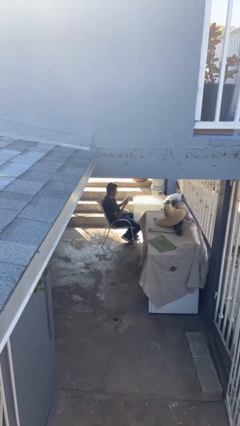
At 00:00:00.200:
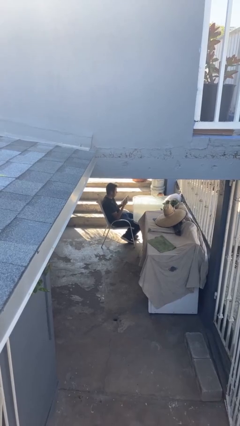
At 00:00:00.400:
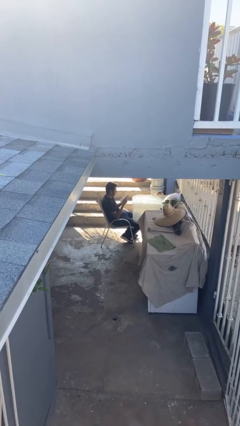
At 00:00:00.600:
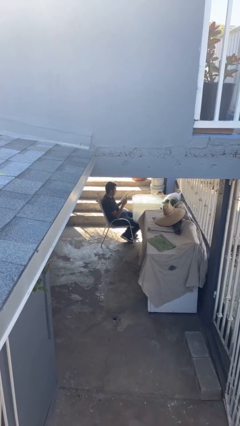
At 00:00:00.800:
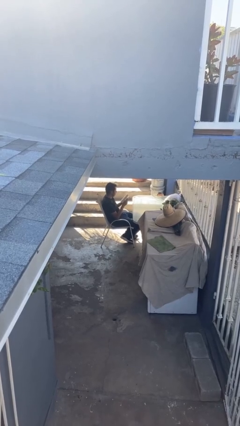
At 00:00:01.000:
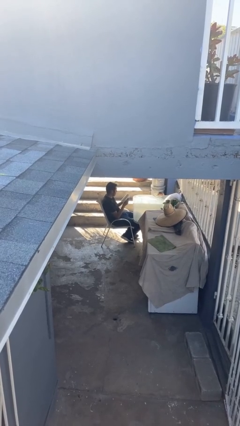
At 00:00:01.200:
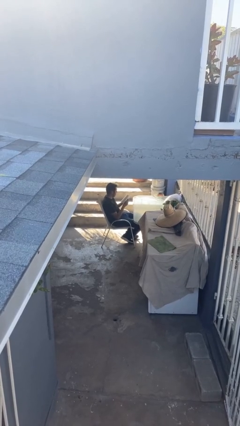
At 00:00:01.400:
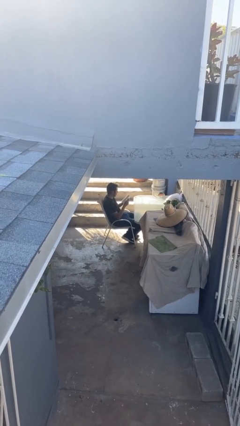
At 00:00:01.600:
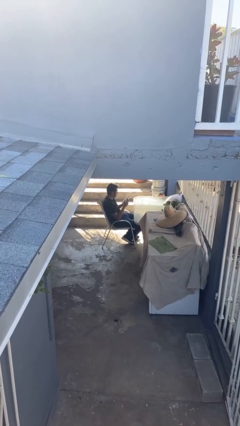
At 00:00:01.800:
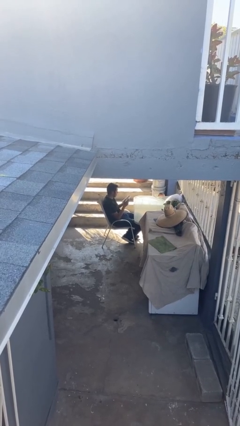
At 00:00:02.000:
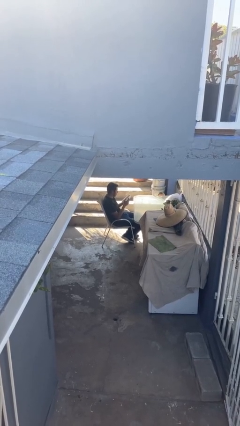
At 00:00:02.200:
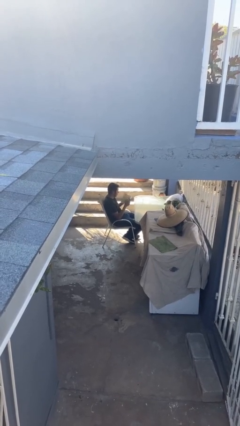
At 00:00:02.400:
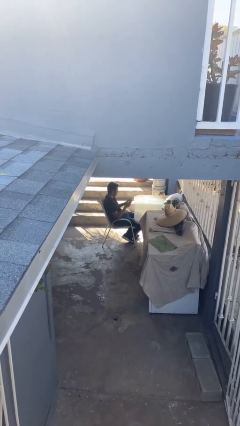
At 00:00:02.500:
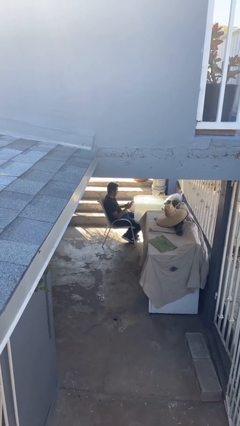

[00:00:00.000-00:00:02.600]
person reads document

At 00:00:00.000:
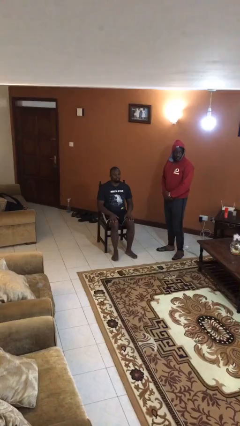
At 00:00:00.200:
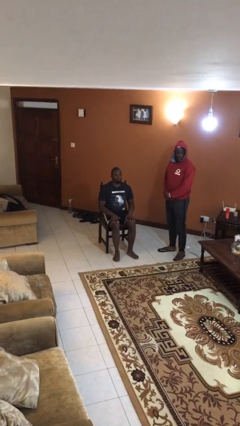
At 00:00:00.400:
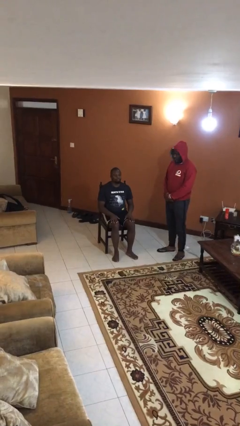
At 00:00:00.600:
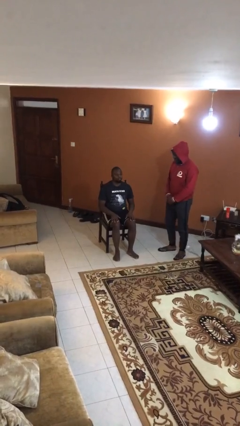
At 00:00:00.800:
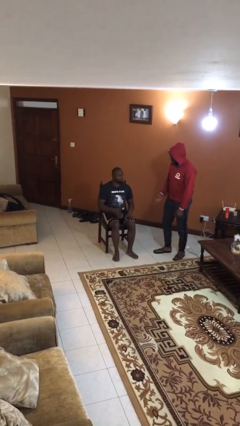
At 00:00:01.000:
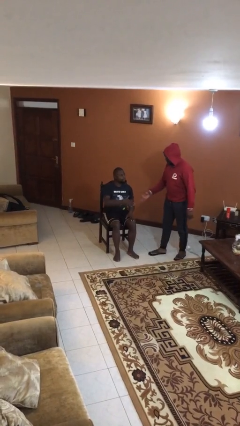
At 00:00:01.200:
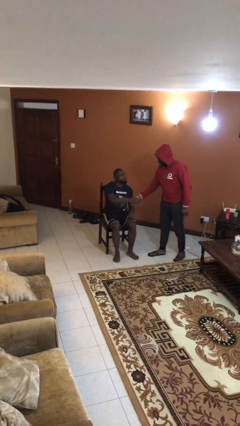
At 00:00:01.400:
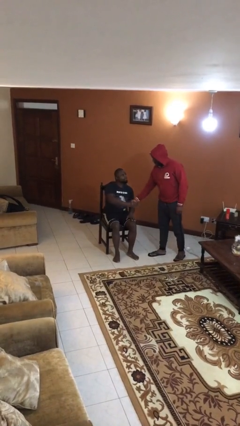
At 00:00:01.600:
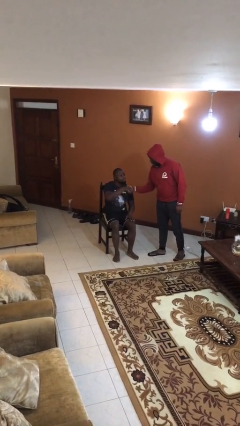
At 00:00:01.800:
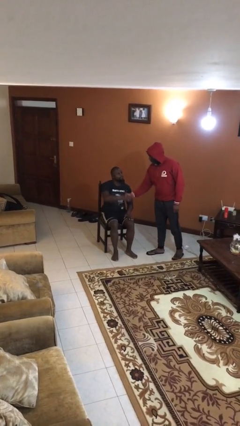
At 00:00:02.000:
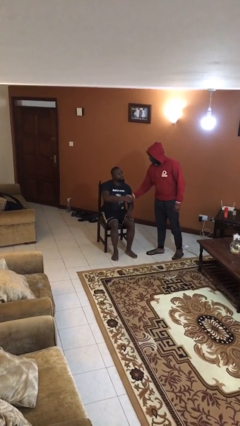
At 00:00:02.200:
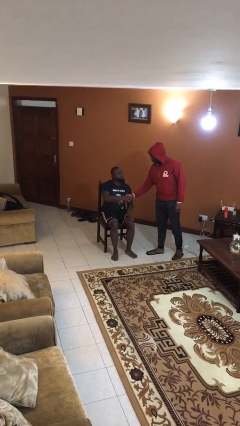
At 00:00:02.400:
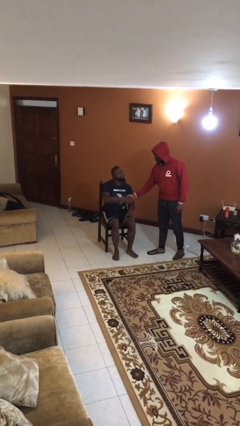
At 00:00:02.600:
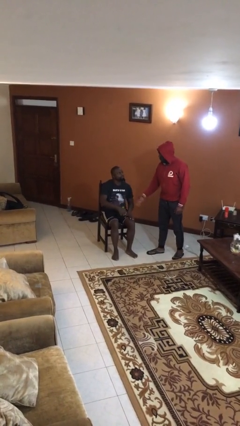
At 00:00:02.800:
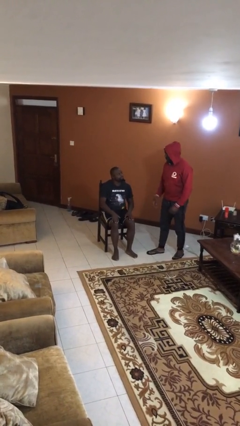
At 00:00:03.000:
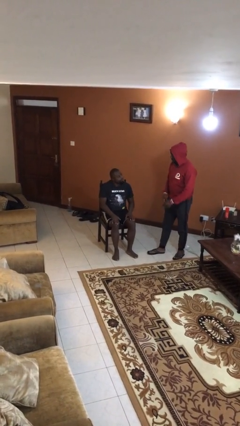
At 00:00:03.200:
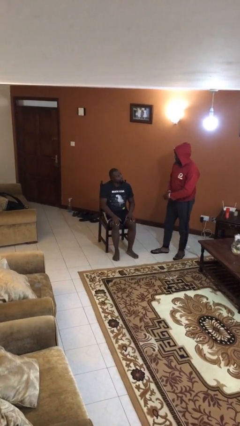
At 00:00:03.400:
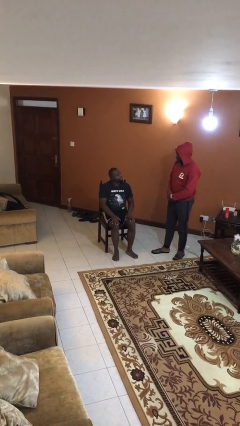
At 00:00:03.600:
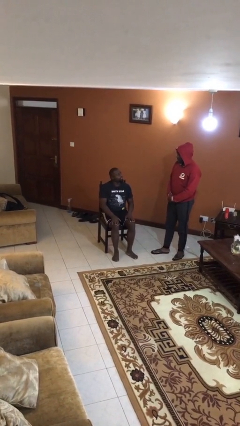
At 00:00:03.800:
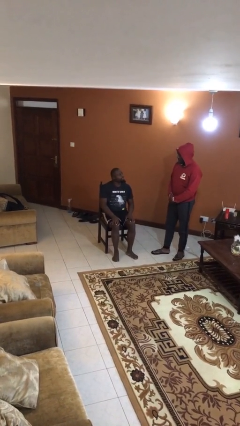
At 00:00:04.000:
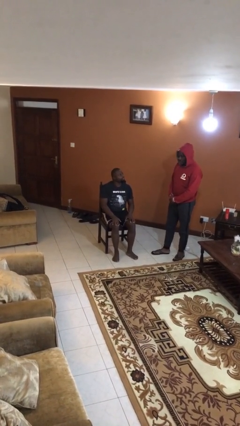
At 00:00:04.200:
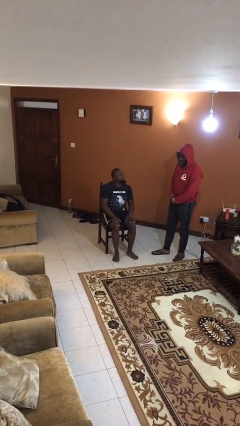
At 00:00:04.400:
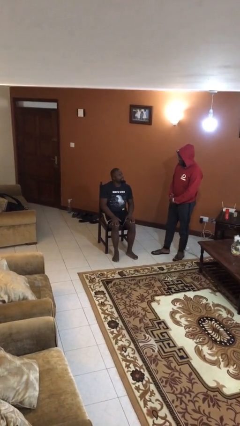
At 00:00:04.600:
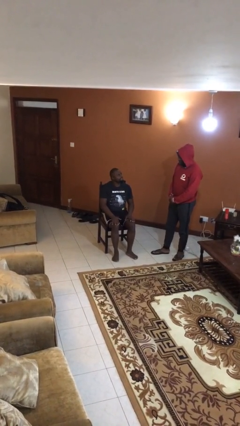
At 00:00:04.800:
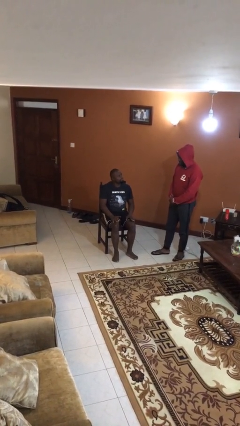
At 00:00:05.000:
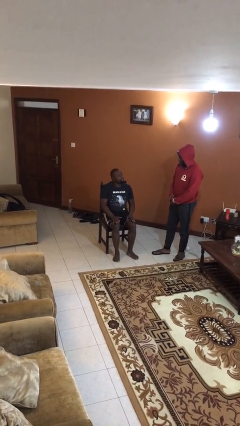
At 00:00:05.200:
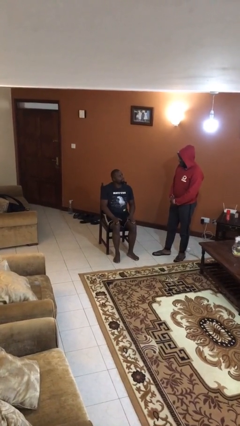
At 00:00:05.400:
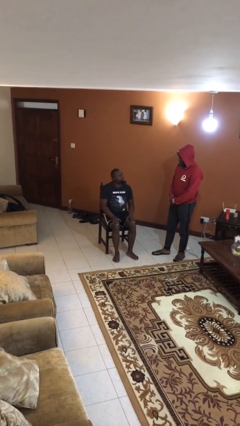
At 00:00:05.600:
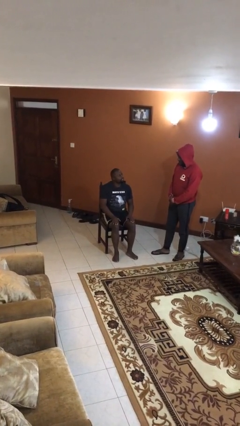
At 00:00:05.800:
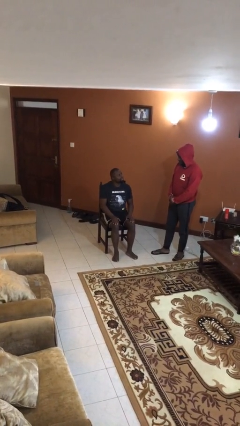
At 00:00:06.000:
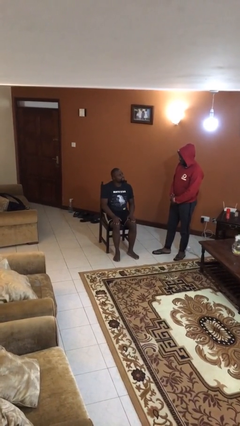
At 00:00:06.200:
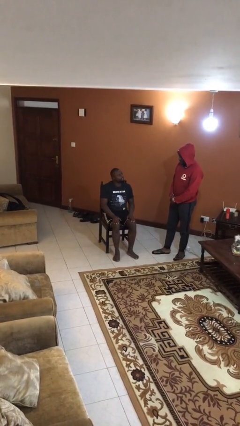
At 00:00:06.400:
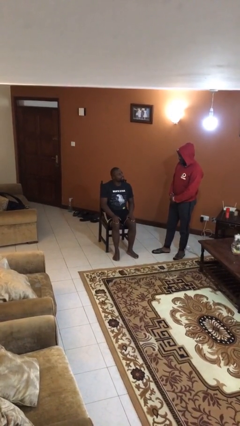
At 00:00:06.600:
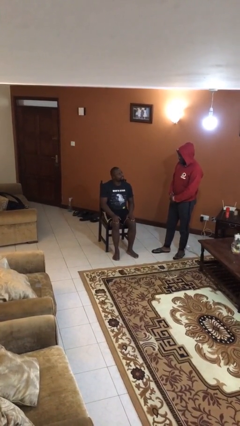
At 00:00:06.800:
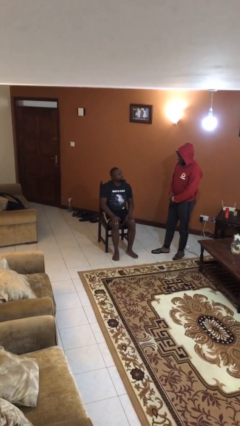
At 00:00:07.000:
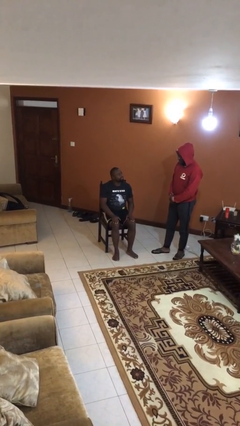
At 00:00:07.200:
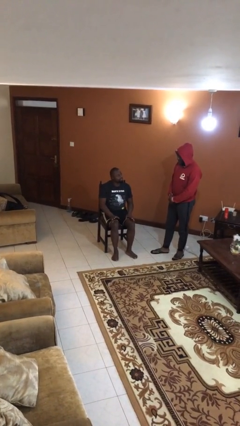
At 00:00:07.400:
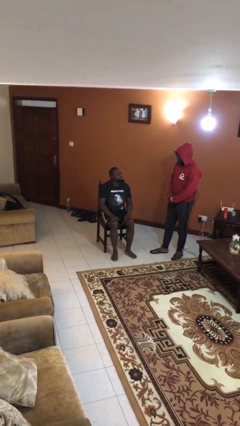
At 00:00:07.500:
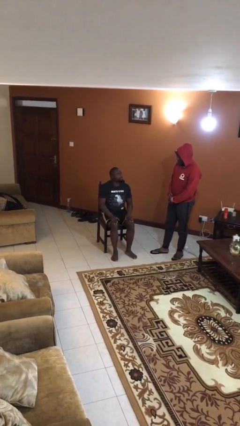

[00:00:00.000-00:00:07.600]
person shakes hand

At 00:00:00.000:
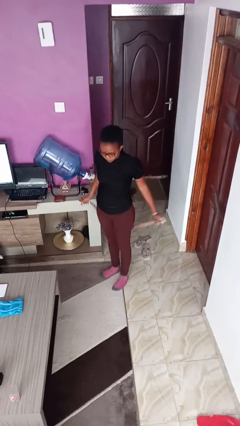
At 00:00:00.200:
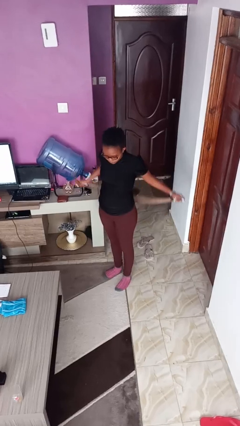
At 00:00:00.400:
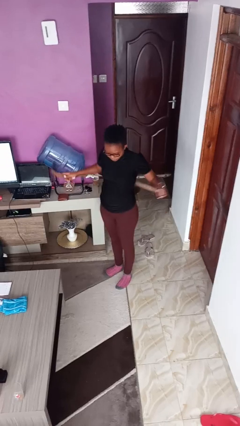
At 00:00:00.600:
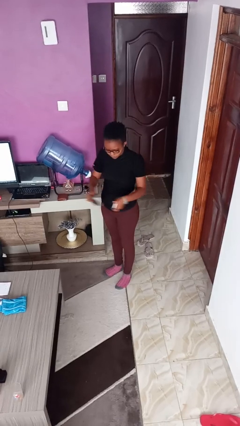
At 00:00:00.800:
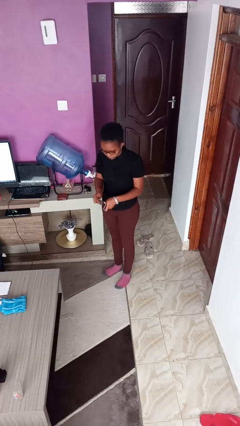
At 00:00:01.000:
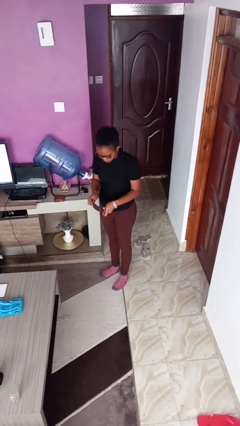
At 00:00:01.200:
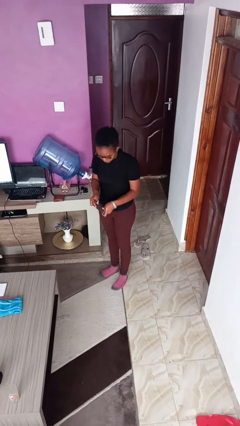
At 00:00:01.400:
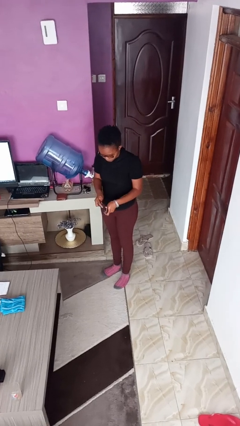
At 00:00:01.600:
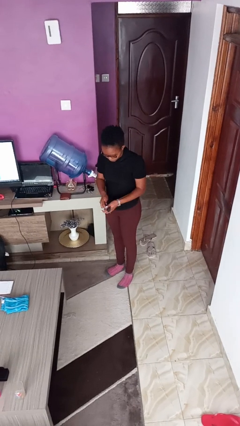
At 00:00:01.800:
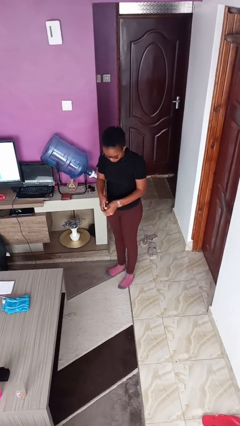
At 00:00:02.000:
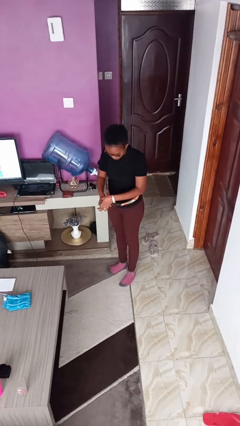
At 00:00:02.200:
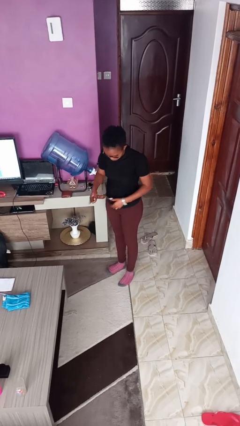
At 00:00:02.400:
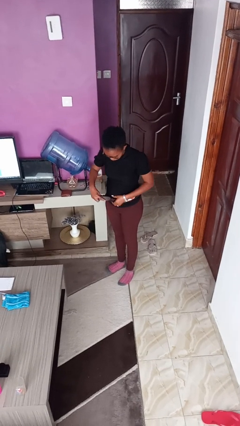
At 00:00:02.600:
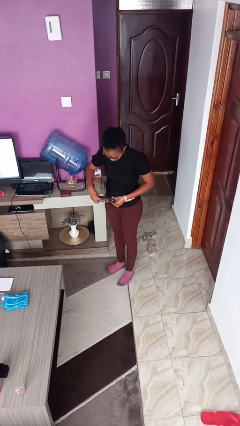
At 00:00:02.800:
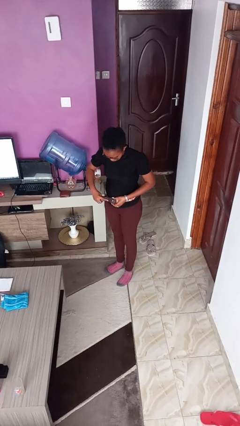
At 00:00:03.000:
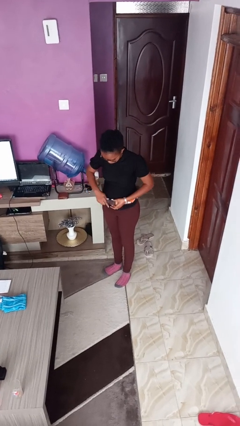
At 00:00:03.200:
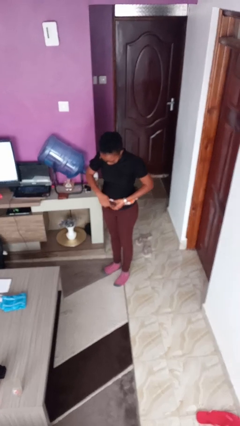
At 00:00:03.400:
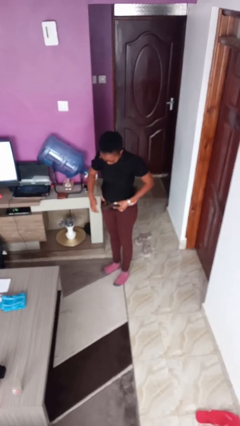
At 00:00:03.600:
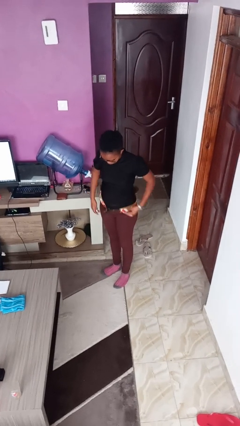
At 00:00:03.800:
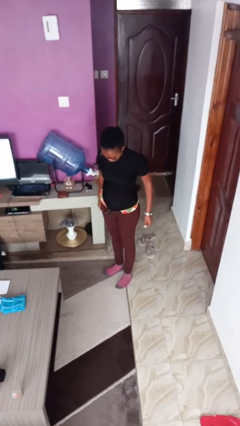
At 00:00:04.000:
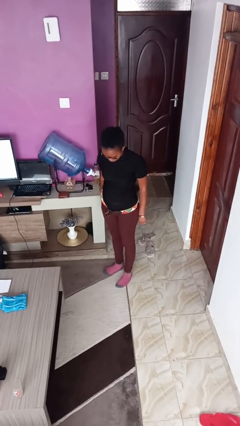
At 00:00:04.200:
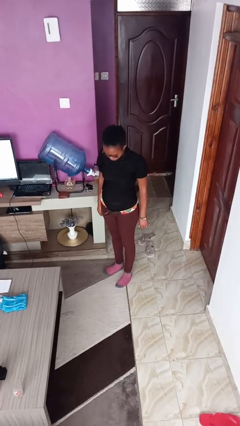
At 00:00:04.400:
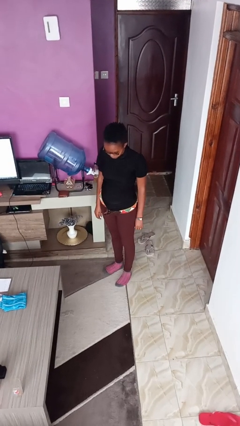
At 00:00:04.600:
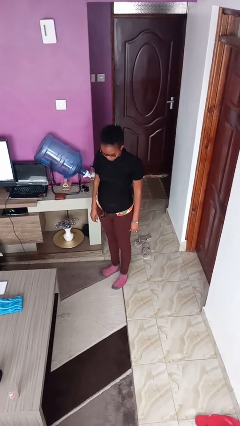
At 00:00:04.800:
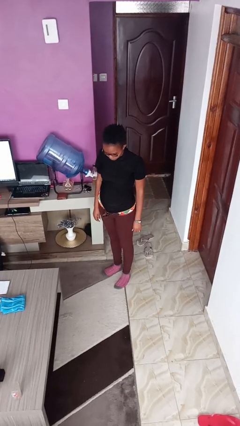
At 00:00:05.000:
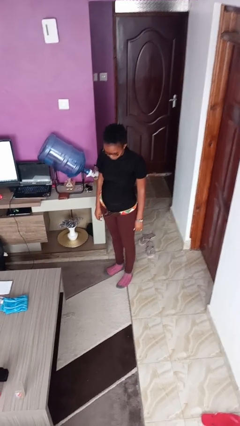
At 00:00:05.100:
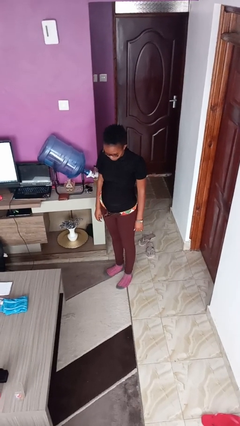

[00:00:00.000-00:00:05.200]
person puts on belt

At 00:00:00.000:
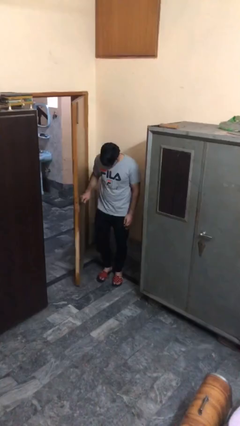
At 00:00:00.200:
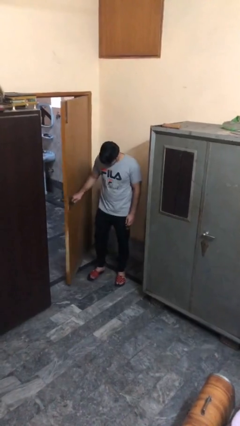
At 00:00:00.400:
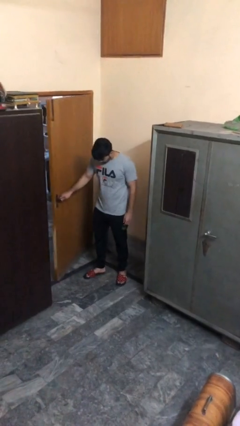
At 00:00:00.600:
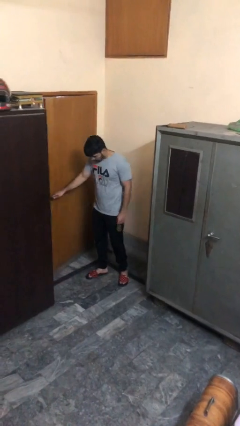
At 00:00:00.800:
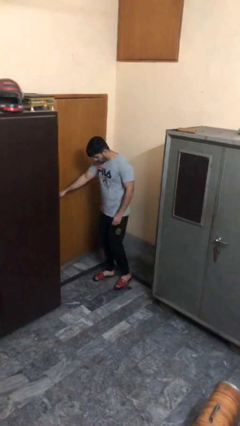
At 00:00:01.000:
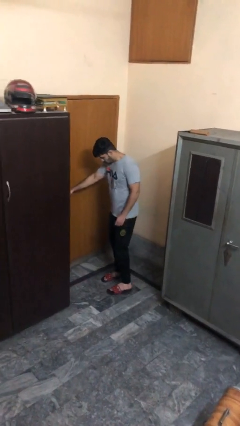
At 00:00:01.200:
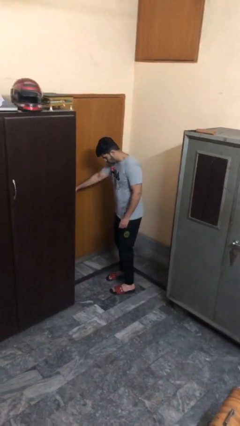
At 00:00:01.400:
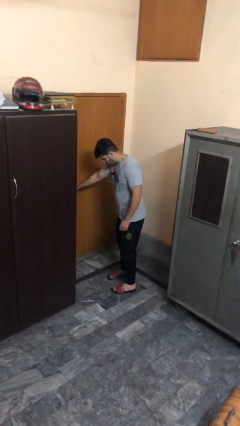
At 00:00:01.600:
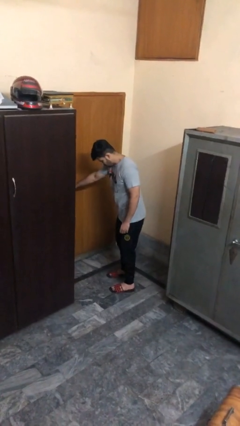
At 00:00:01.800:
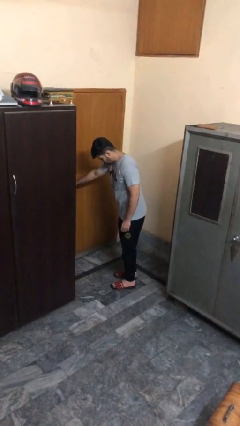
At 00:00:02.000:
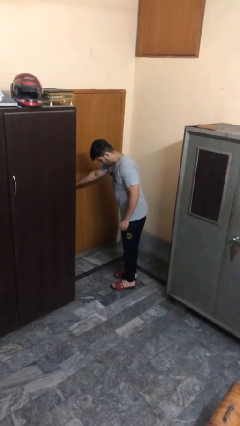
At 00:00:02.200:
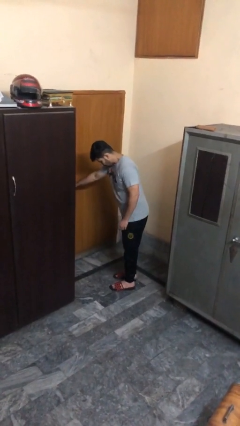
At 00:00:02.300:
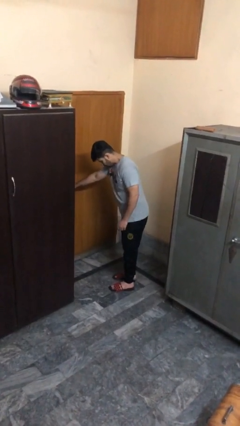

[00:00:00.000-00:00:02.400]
person closes facility door
